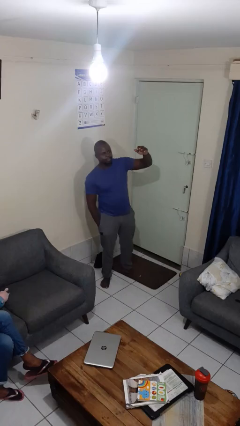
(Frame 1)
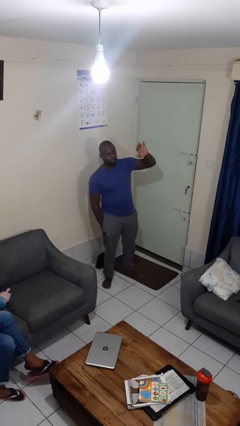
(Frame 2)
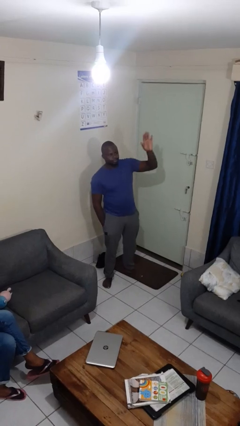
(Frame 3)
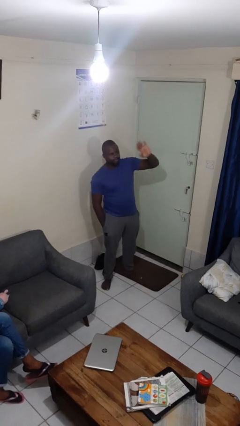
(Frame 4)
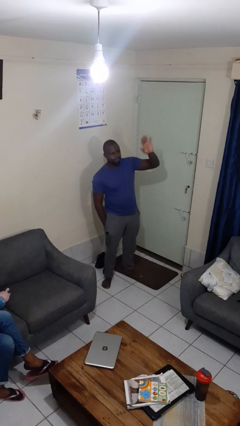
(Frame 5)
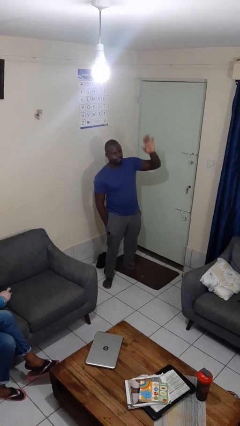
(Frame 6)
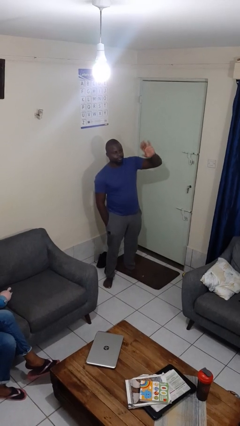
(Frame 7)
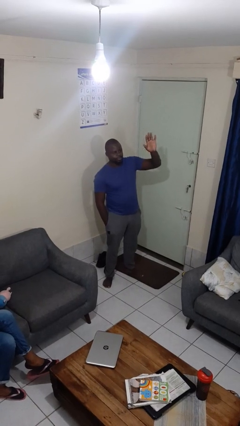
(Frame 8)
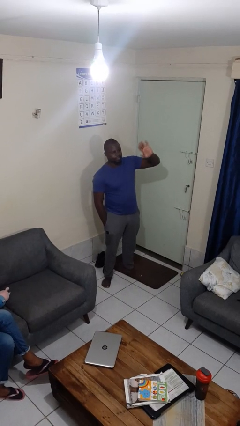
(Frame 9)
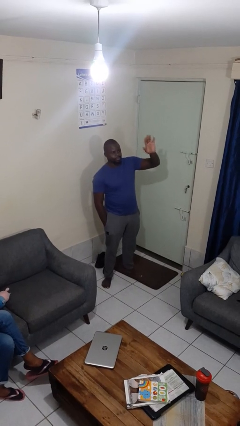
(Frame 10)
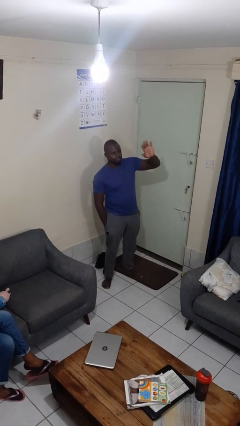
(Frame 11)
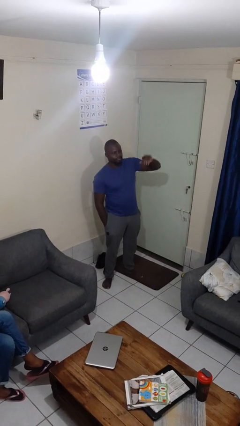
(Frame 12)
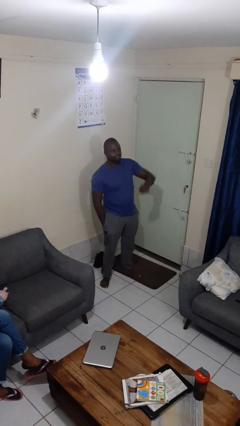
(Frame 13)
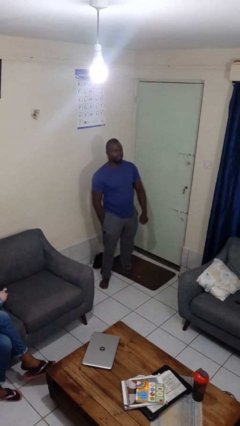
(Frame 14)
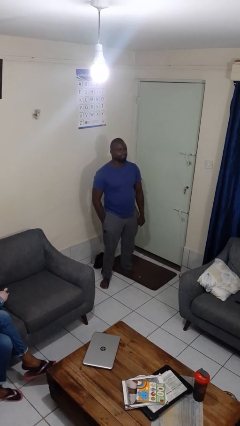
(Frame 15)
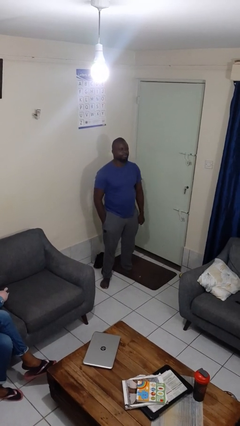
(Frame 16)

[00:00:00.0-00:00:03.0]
person waves at person

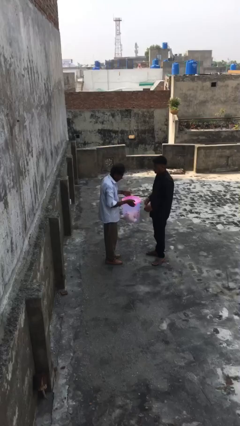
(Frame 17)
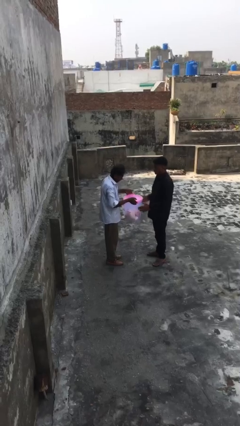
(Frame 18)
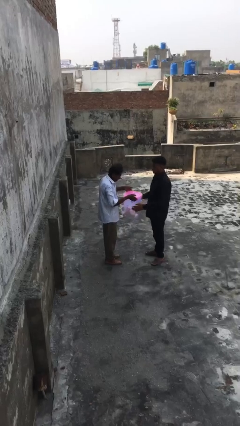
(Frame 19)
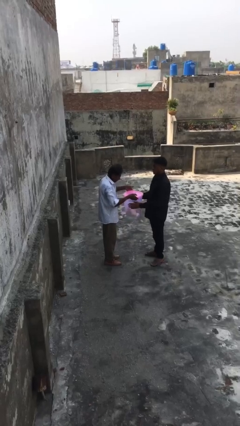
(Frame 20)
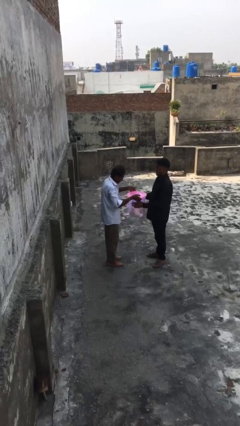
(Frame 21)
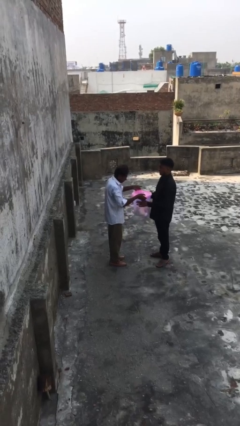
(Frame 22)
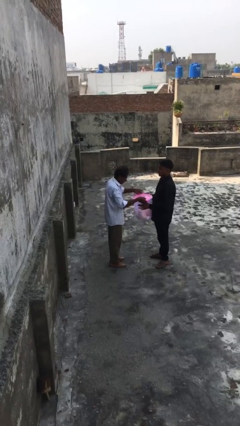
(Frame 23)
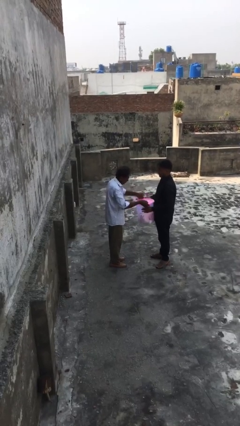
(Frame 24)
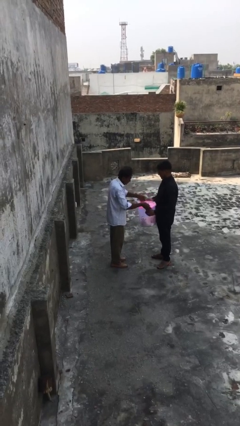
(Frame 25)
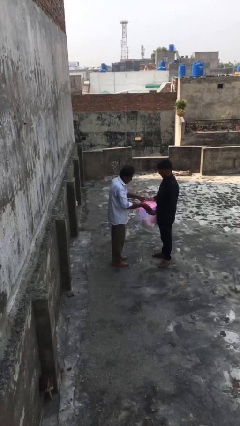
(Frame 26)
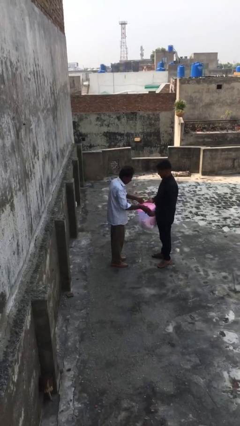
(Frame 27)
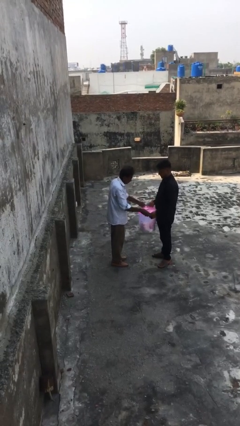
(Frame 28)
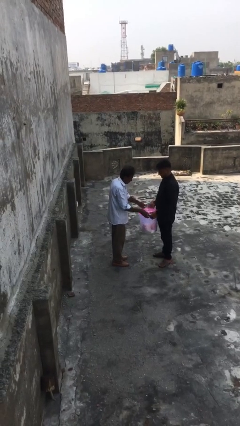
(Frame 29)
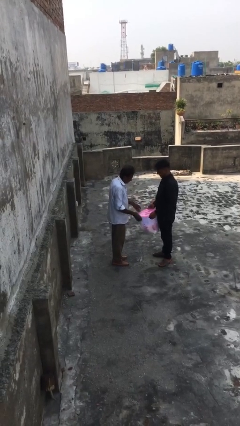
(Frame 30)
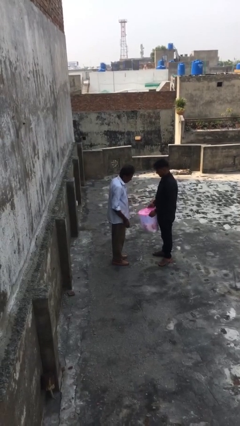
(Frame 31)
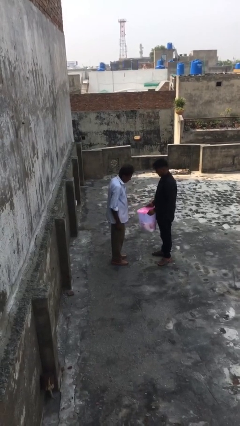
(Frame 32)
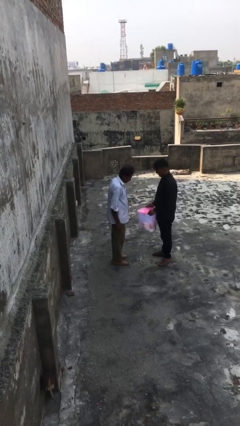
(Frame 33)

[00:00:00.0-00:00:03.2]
person transfers object to person

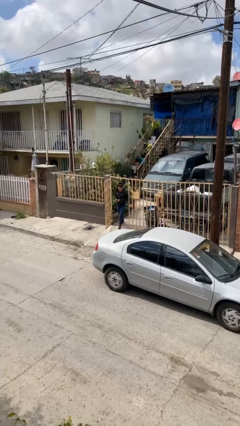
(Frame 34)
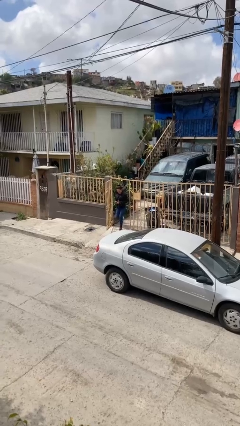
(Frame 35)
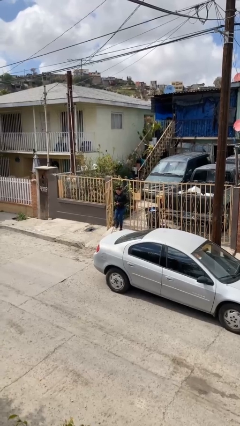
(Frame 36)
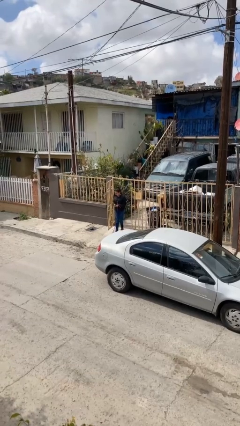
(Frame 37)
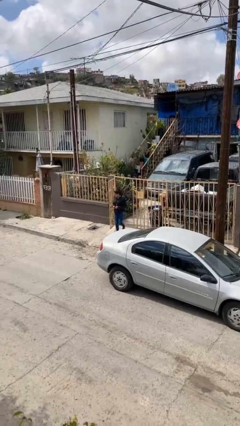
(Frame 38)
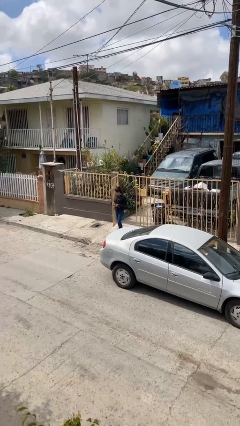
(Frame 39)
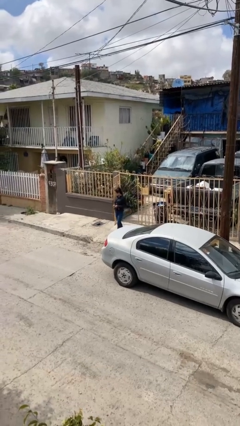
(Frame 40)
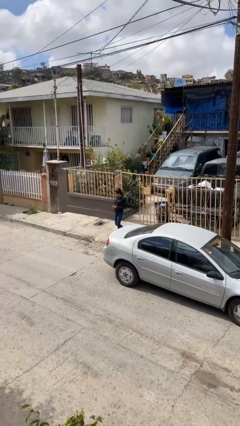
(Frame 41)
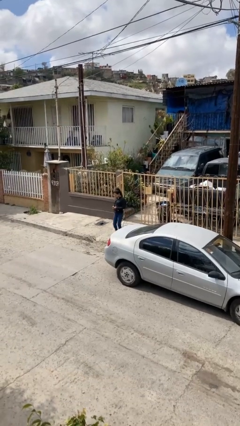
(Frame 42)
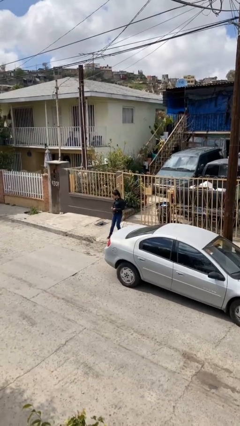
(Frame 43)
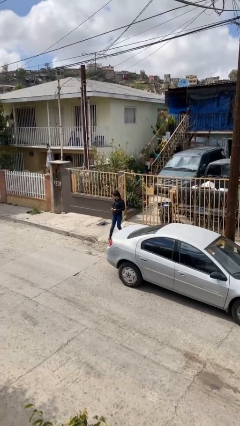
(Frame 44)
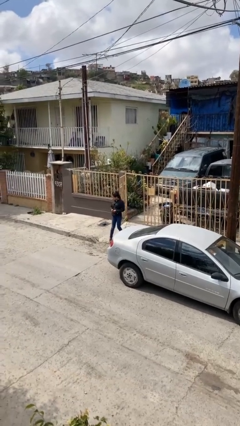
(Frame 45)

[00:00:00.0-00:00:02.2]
person enters scene through structure

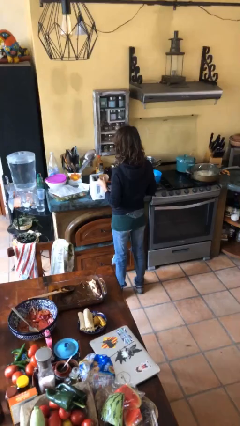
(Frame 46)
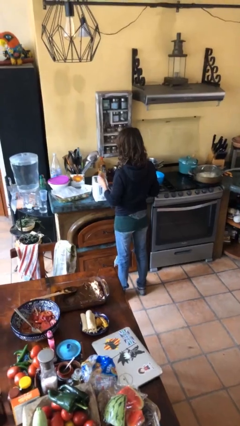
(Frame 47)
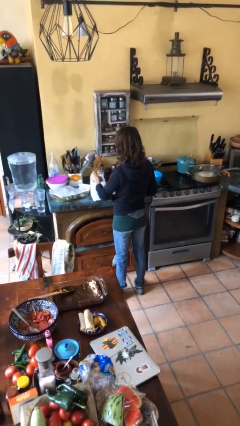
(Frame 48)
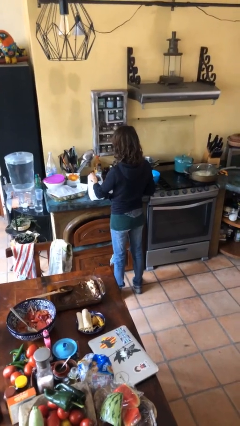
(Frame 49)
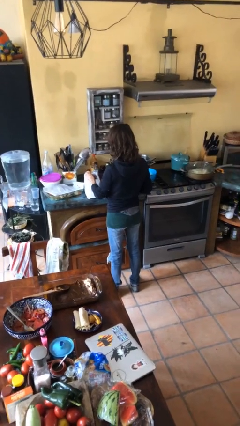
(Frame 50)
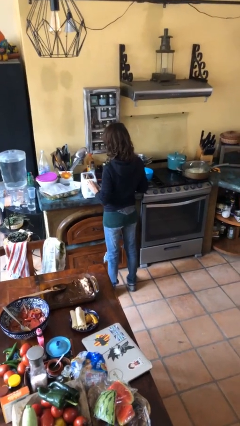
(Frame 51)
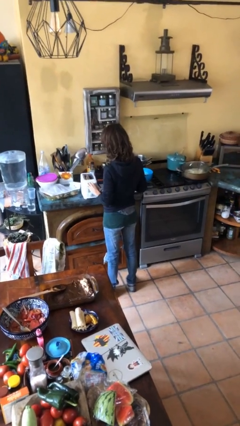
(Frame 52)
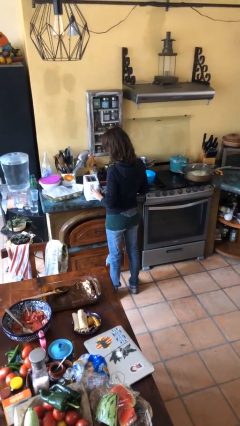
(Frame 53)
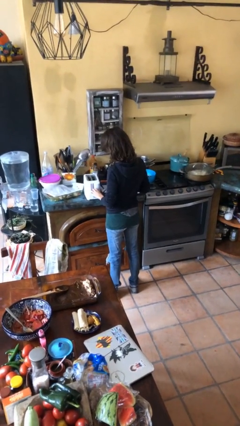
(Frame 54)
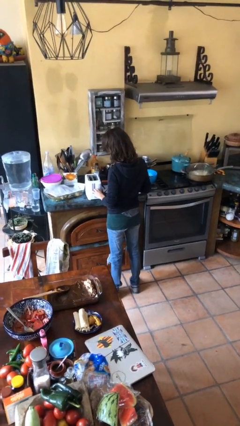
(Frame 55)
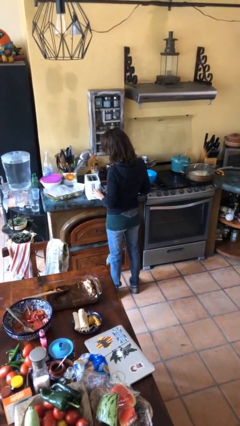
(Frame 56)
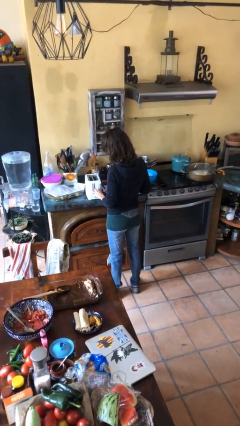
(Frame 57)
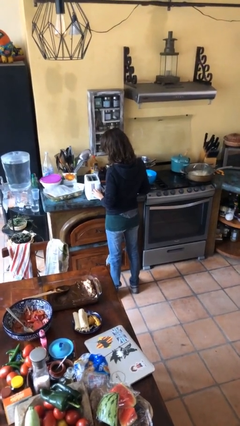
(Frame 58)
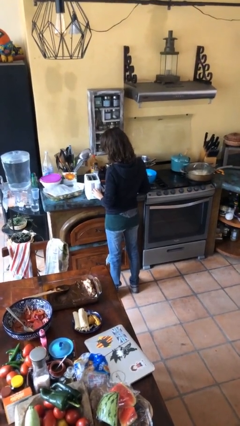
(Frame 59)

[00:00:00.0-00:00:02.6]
person puts object into toaster

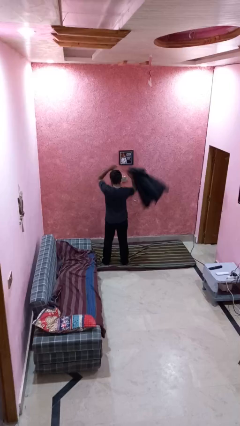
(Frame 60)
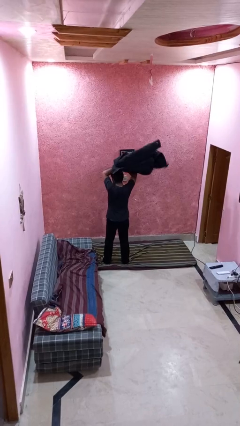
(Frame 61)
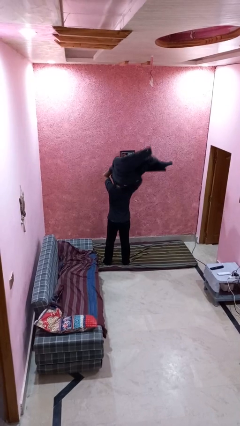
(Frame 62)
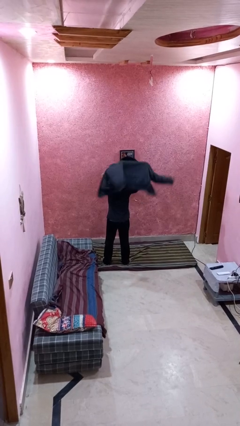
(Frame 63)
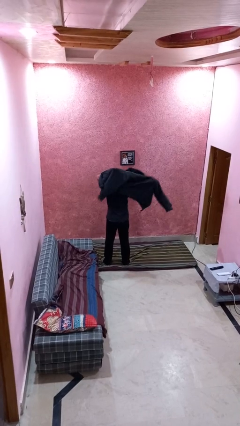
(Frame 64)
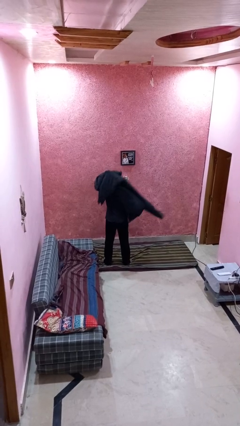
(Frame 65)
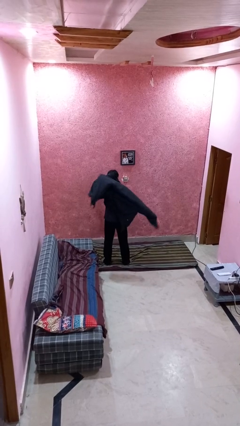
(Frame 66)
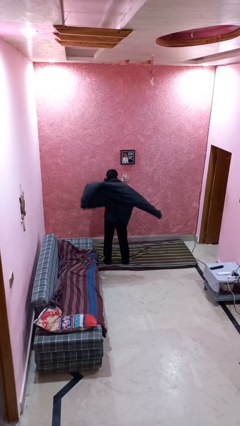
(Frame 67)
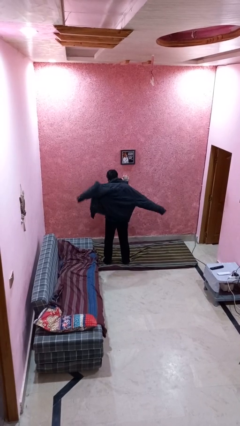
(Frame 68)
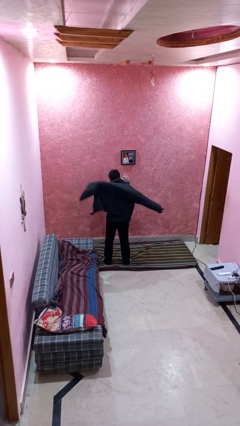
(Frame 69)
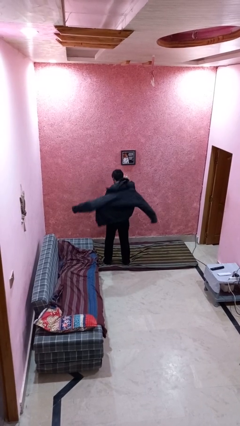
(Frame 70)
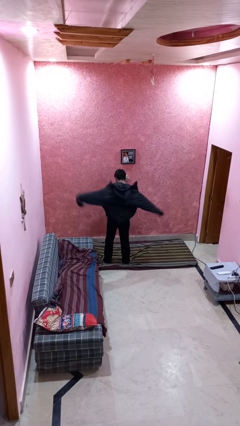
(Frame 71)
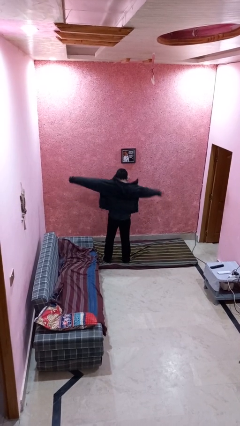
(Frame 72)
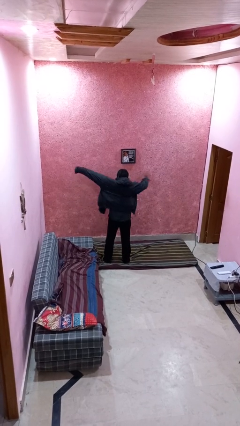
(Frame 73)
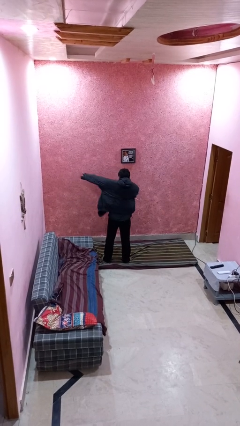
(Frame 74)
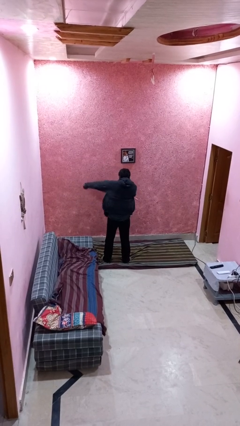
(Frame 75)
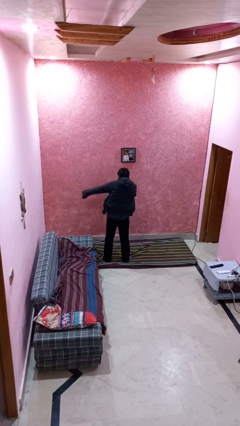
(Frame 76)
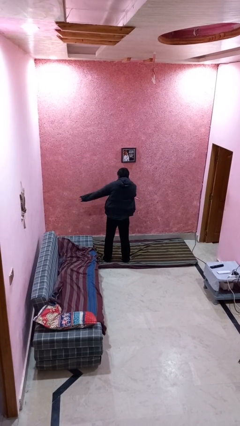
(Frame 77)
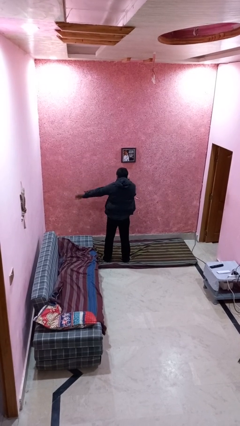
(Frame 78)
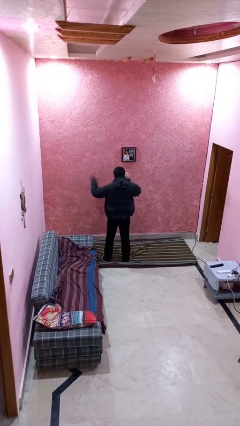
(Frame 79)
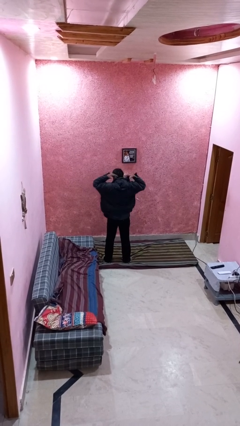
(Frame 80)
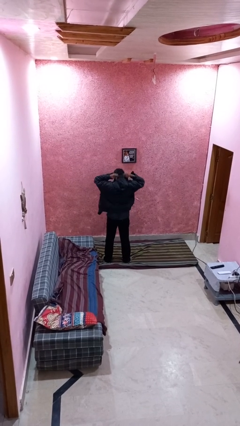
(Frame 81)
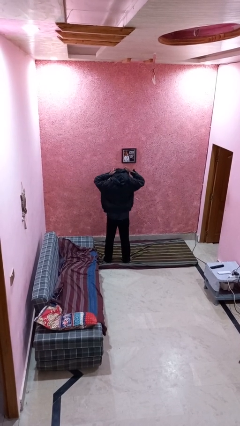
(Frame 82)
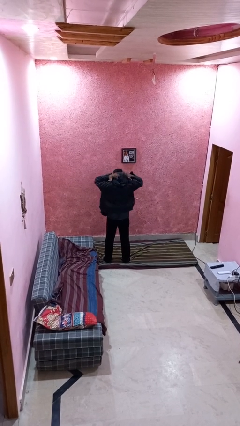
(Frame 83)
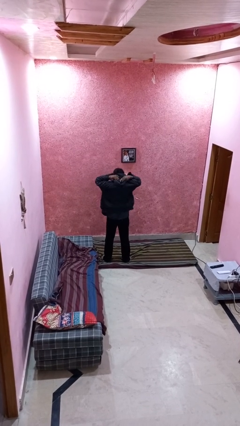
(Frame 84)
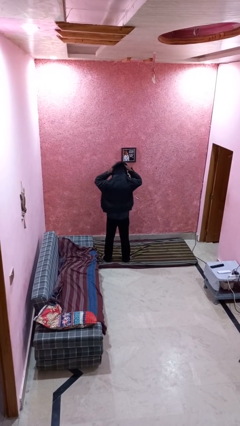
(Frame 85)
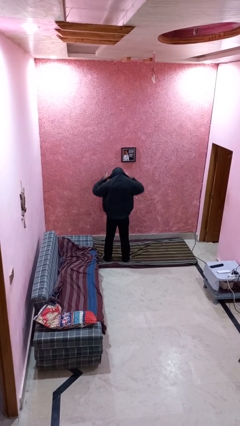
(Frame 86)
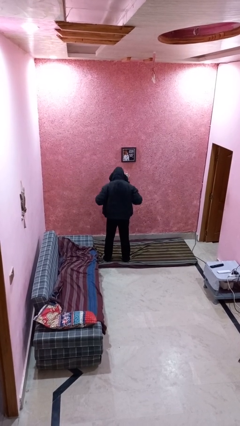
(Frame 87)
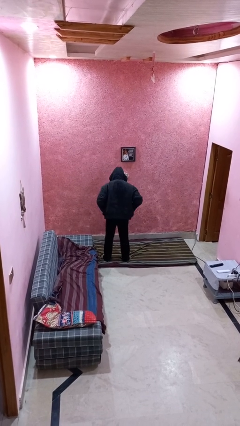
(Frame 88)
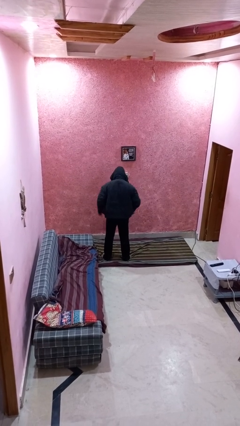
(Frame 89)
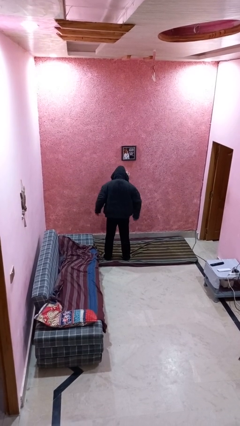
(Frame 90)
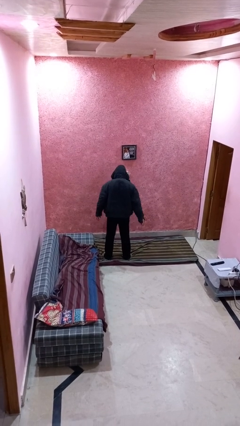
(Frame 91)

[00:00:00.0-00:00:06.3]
person puts on hoodie

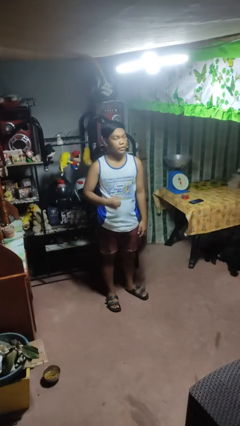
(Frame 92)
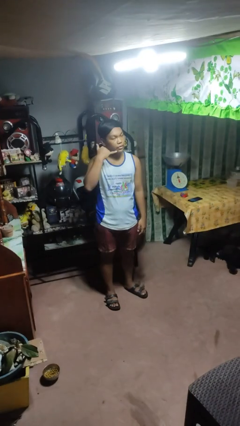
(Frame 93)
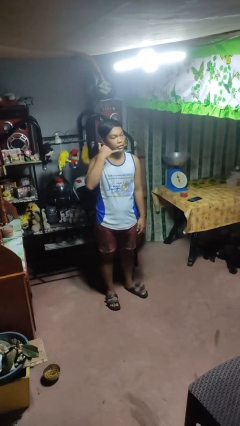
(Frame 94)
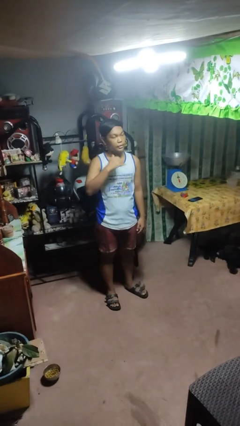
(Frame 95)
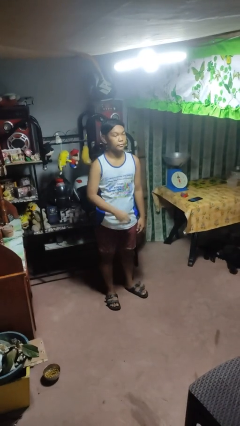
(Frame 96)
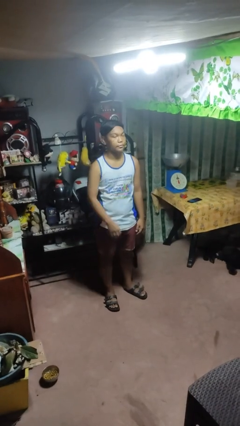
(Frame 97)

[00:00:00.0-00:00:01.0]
person gestures call me
